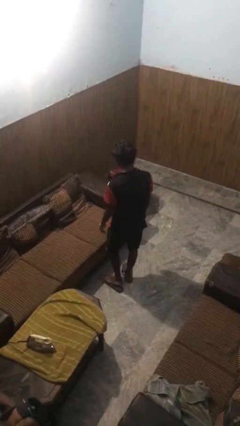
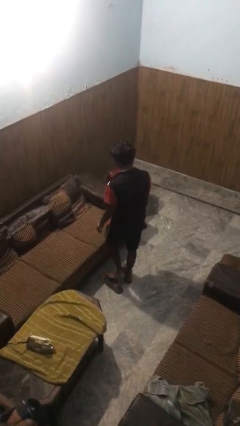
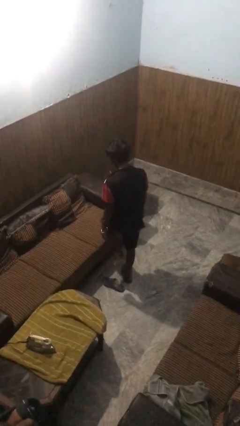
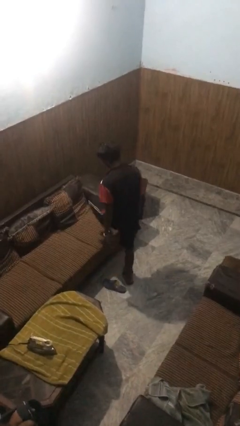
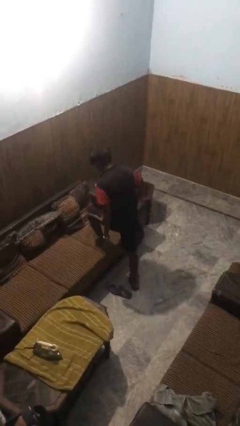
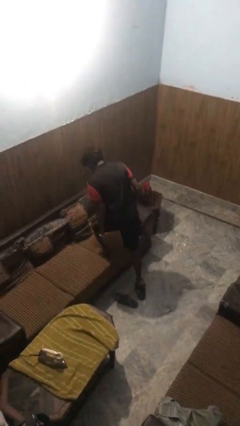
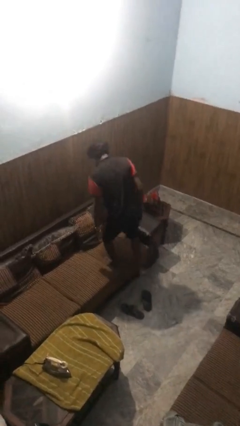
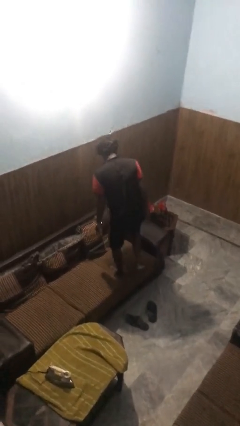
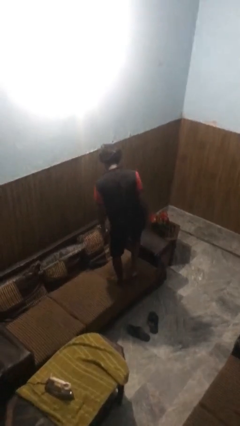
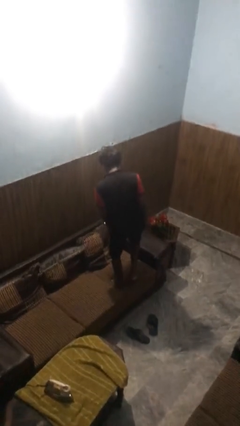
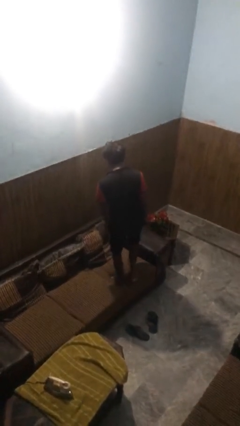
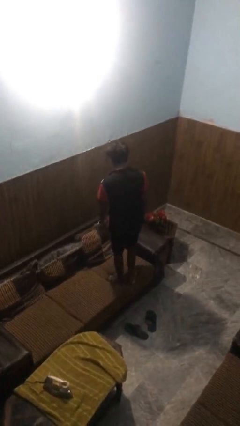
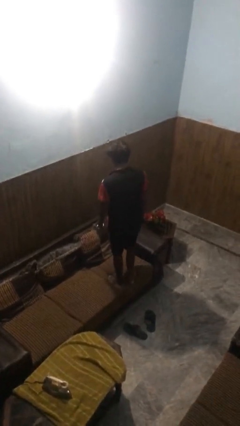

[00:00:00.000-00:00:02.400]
person climbs on couch

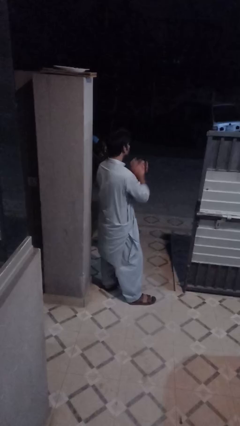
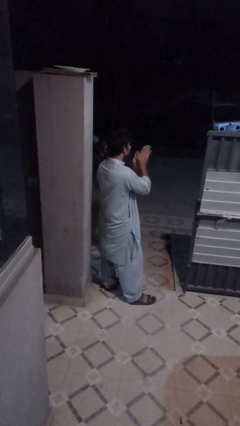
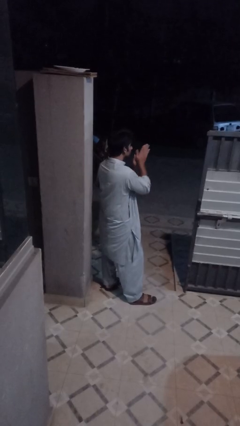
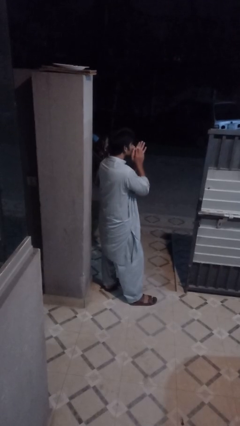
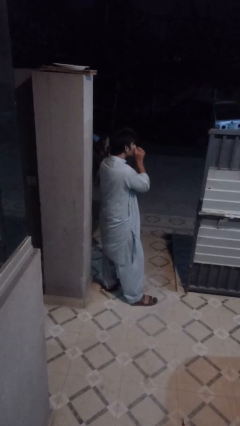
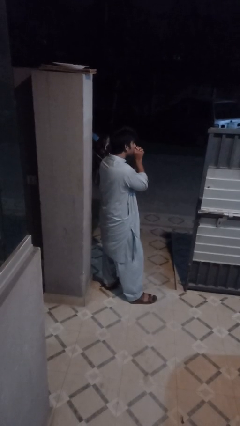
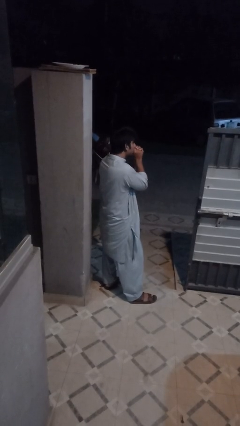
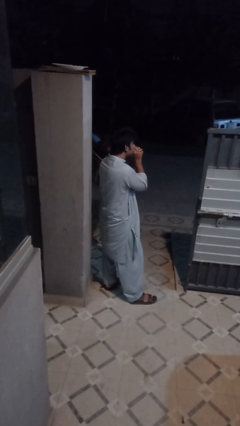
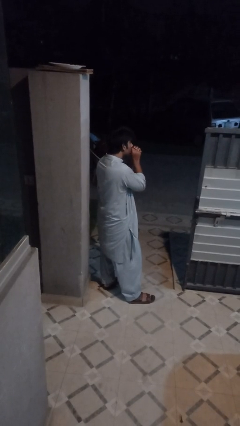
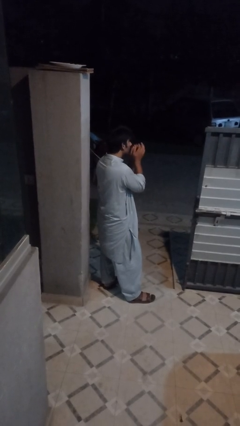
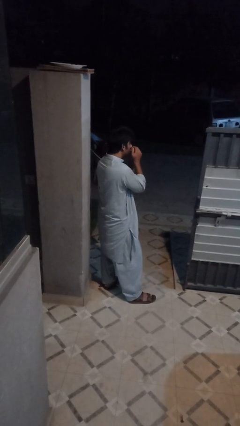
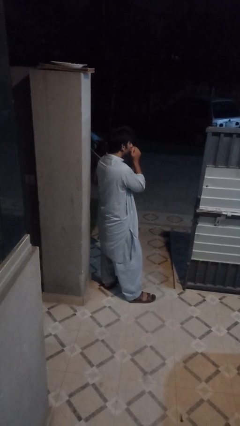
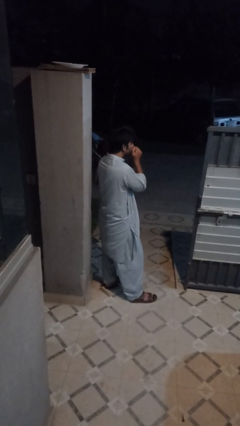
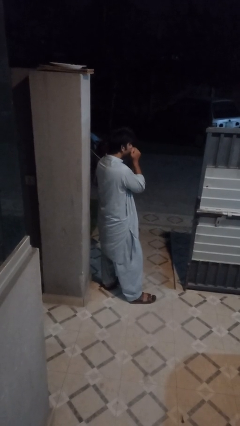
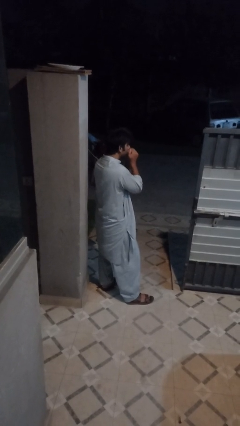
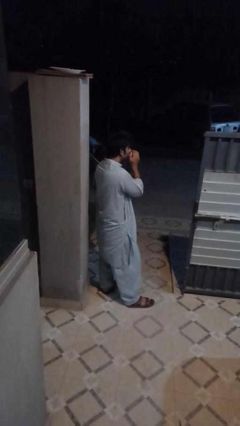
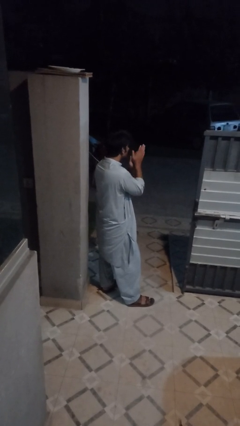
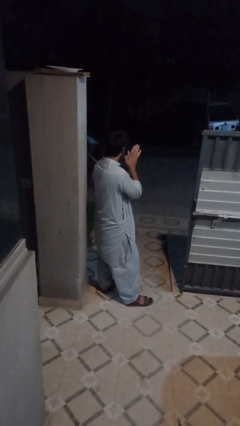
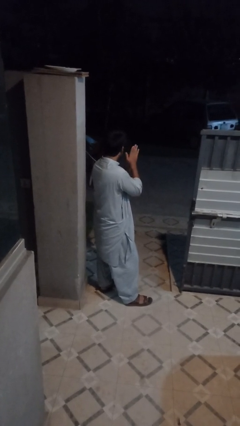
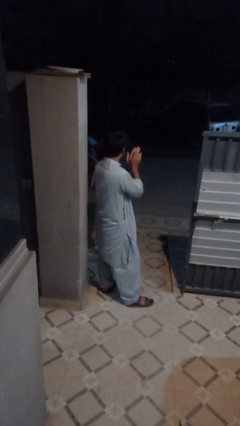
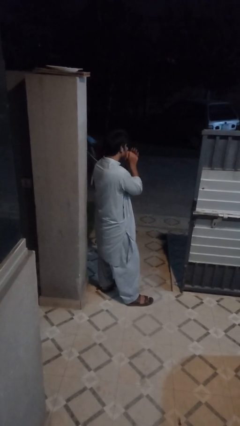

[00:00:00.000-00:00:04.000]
person blows into hands

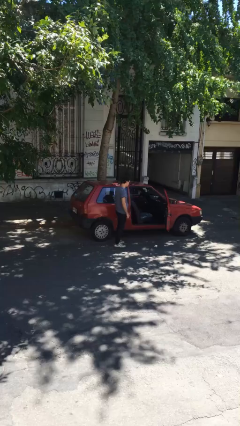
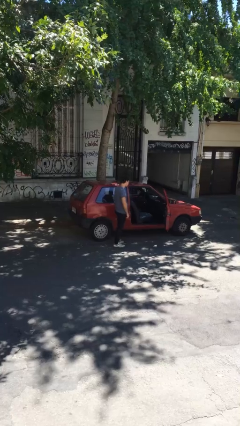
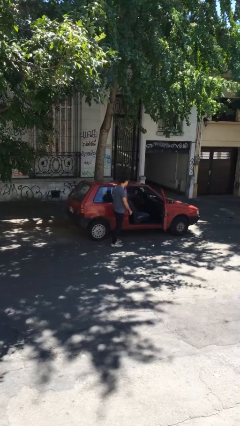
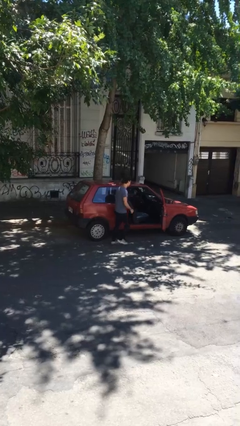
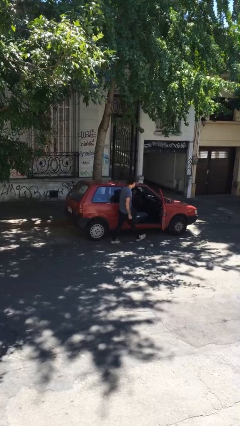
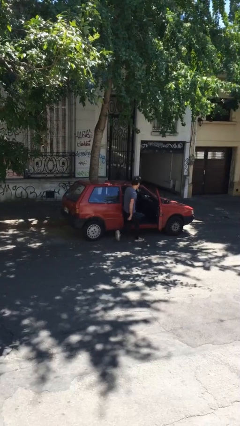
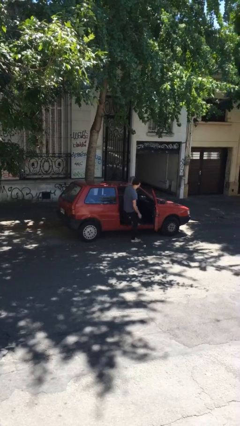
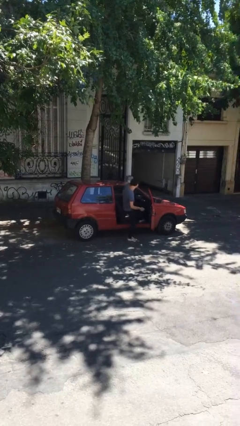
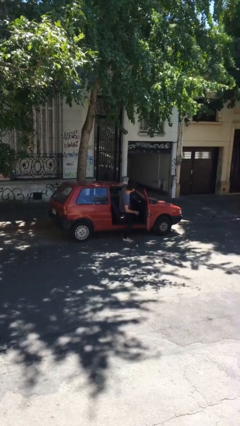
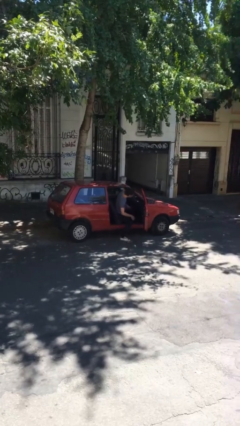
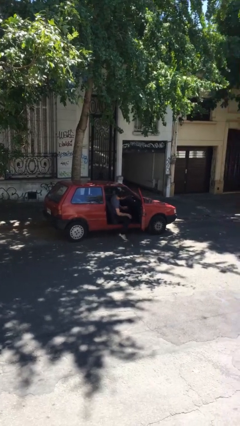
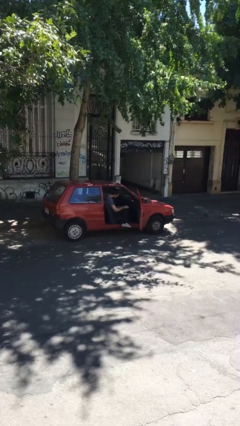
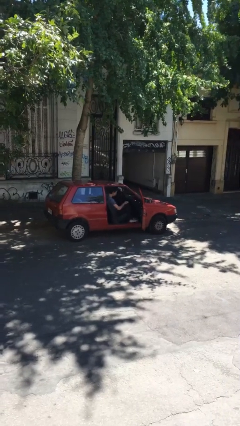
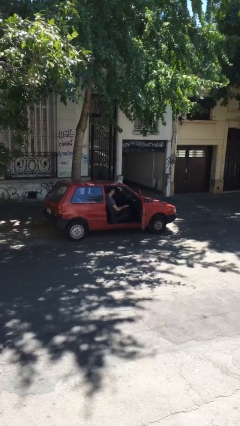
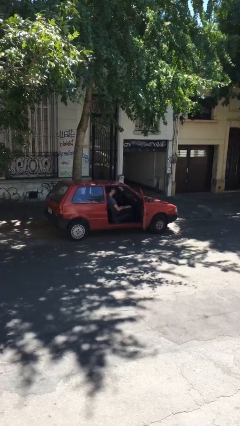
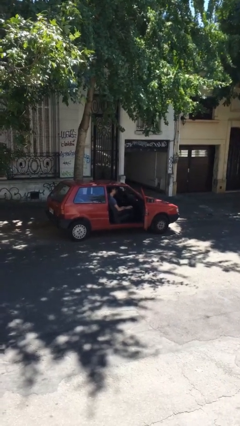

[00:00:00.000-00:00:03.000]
person enters car

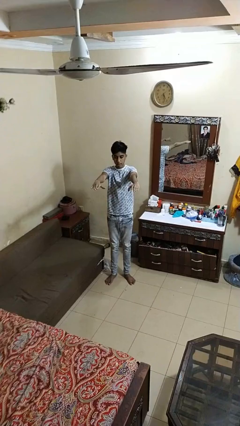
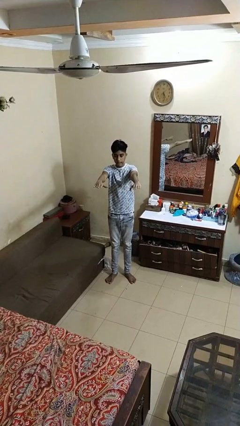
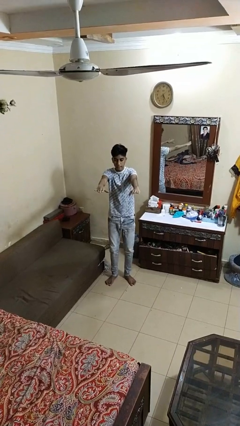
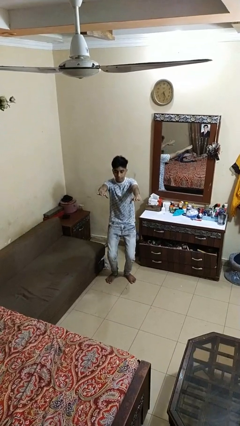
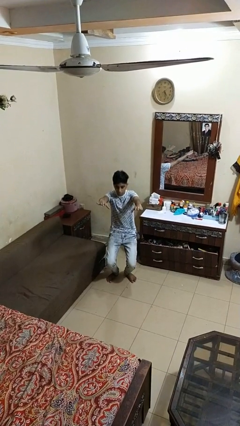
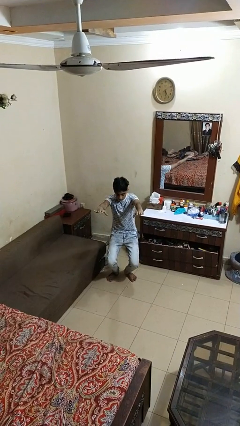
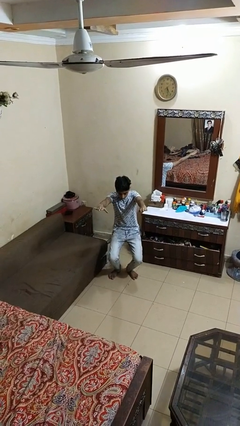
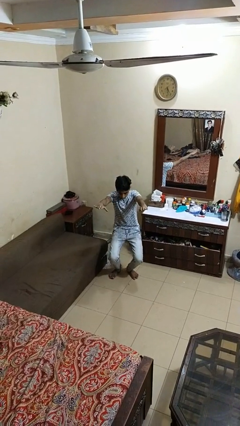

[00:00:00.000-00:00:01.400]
person squats

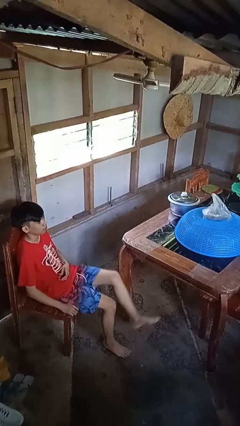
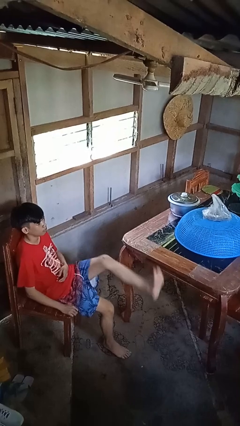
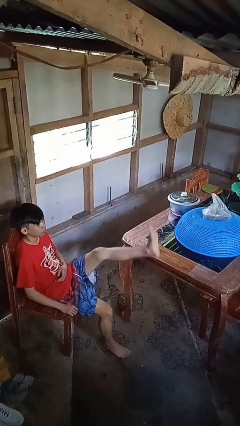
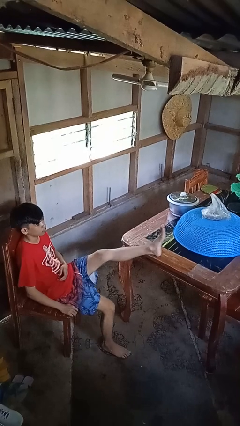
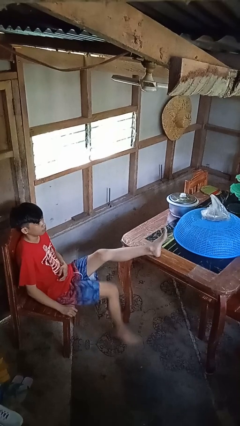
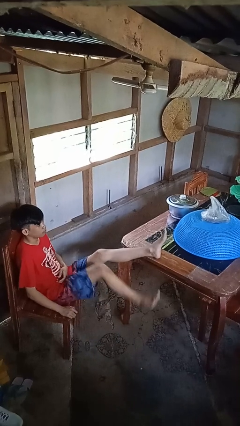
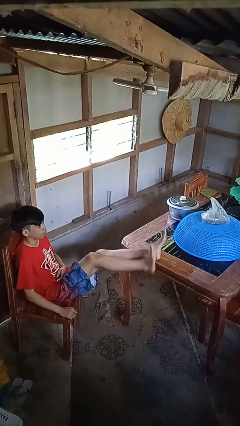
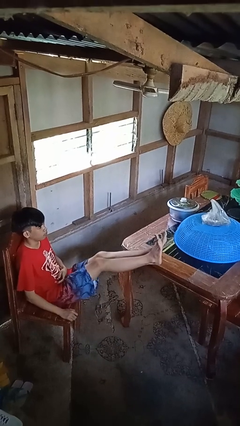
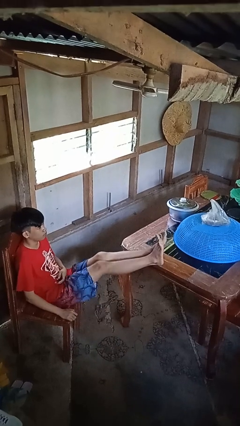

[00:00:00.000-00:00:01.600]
person puts feet up

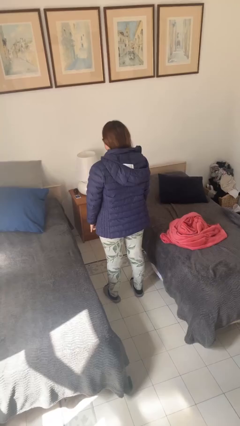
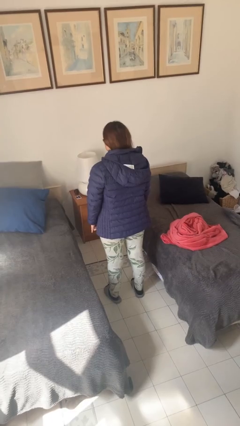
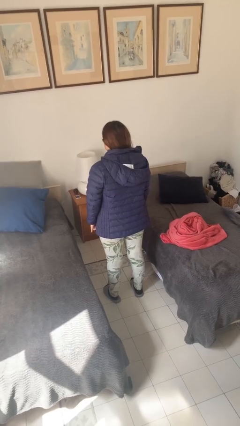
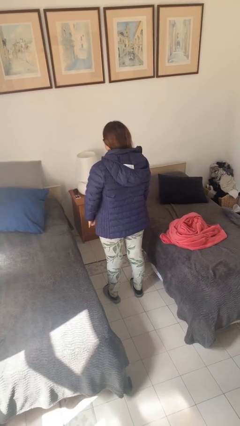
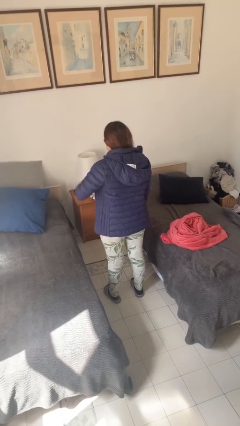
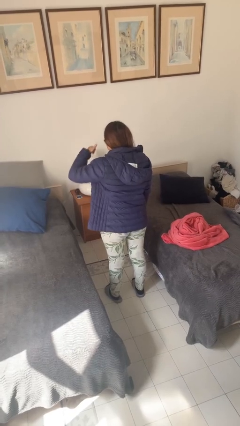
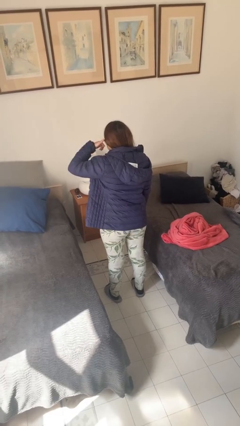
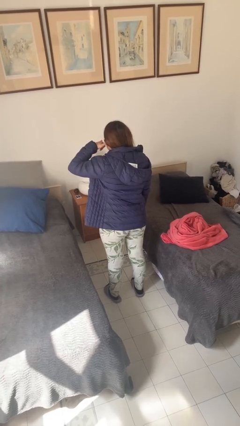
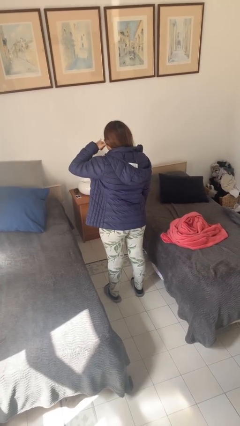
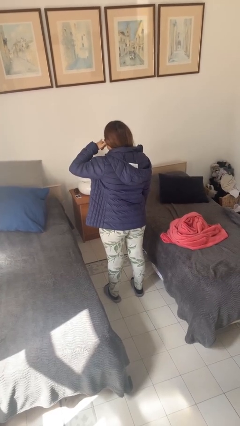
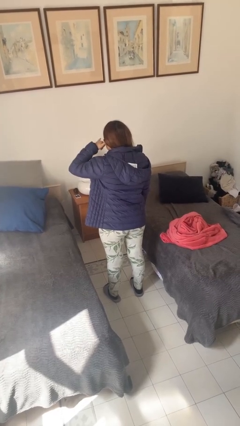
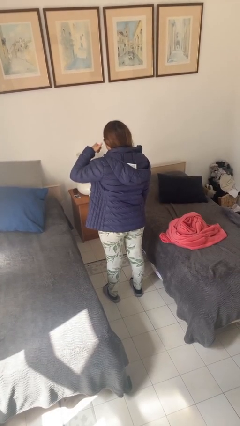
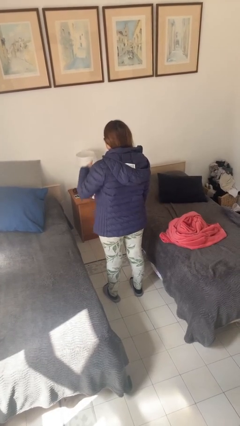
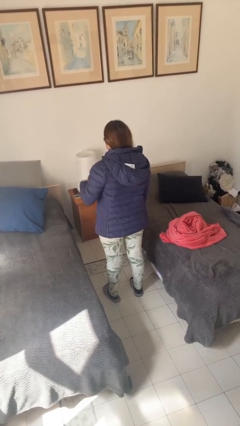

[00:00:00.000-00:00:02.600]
person gestures call me

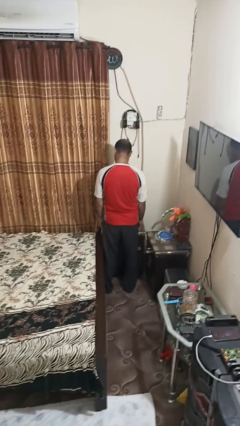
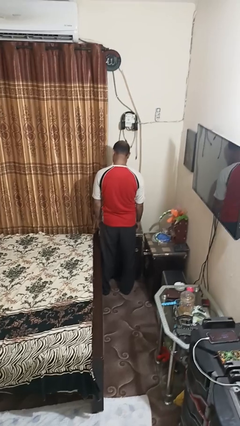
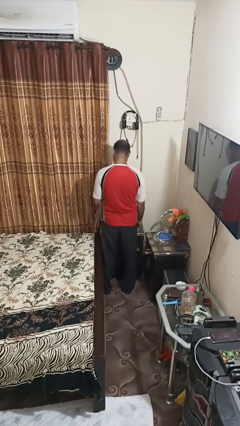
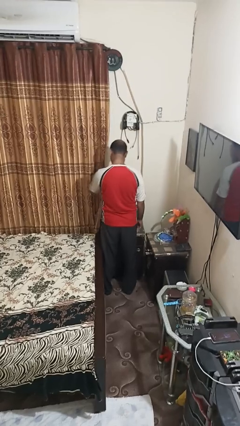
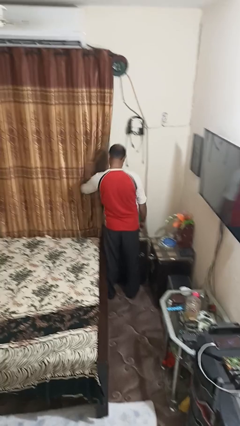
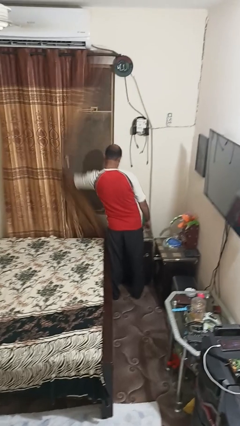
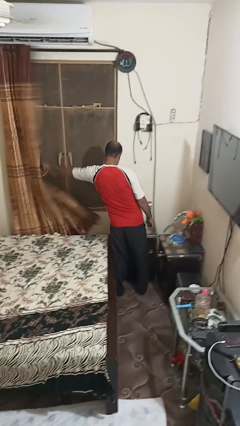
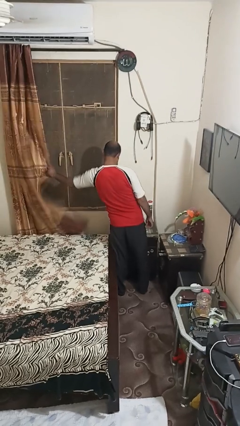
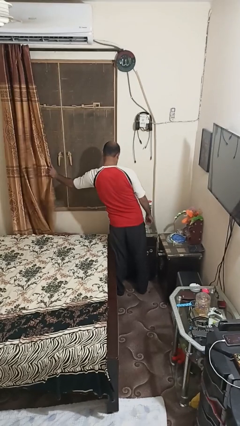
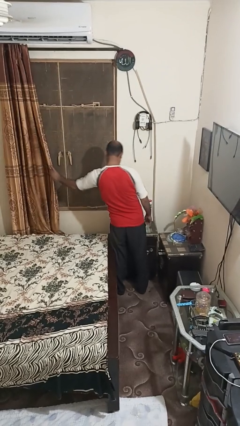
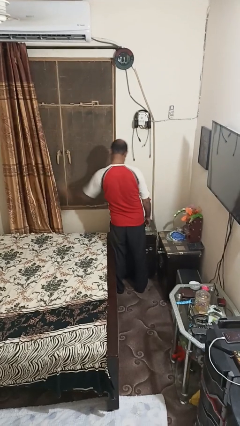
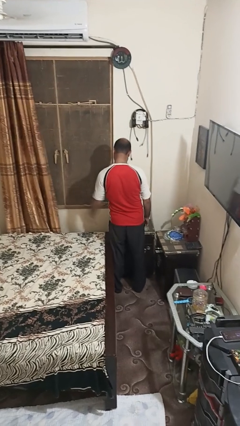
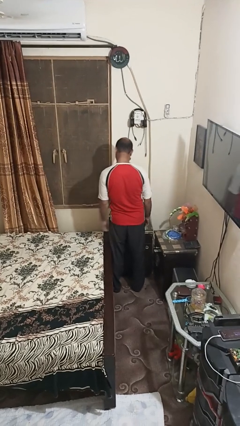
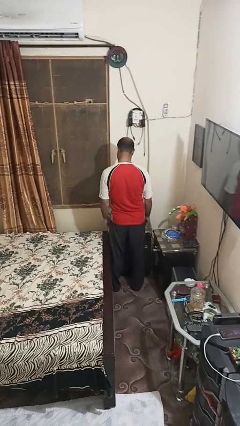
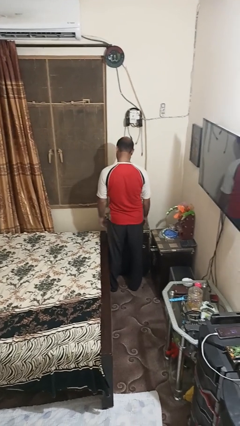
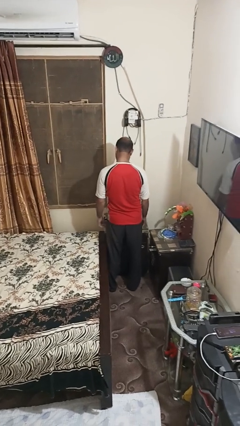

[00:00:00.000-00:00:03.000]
person opens curtains
